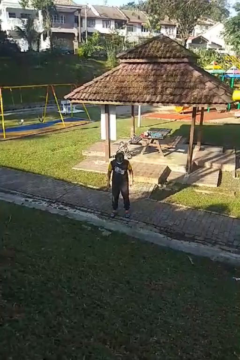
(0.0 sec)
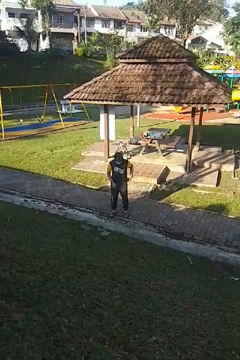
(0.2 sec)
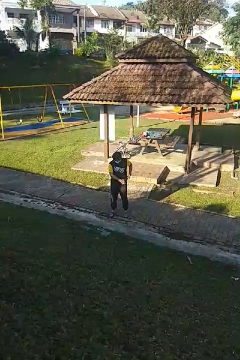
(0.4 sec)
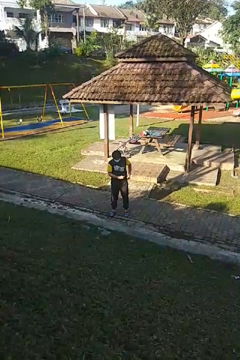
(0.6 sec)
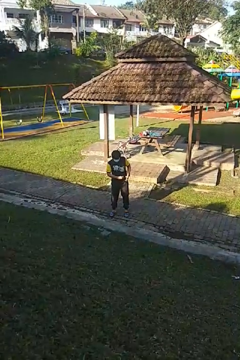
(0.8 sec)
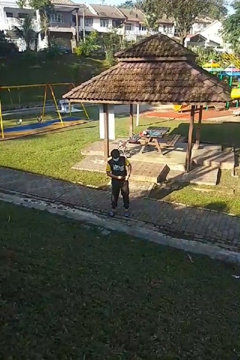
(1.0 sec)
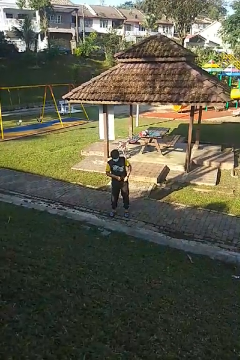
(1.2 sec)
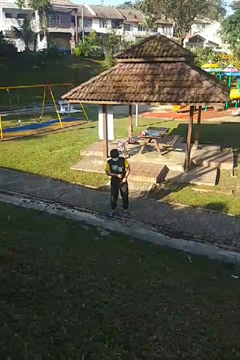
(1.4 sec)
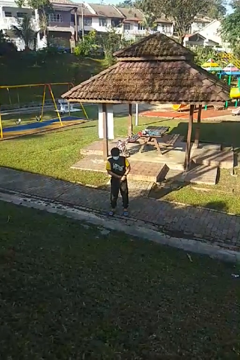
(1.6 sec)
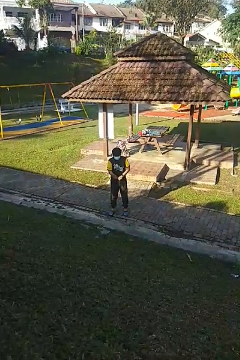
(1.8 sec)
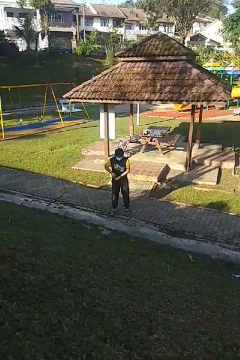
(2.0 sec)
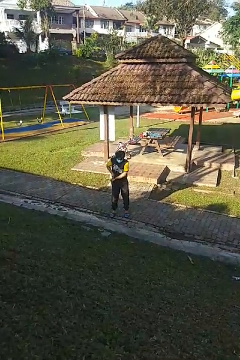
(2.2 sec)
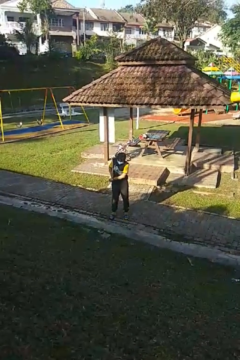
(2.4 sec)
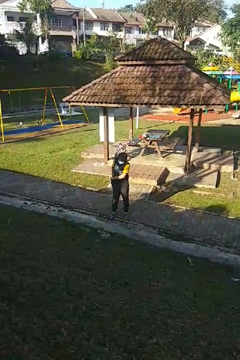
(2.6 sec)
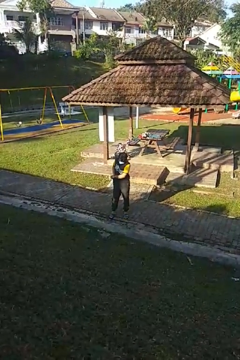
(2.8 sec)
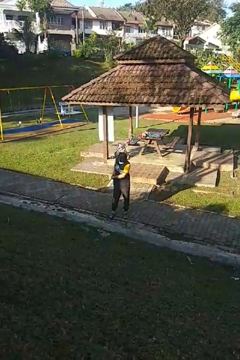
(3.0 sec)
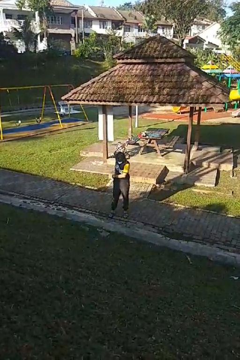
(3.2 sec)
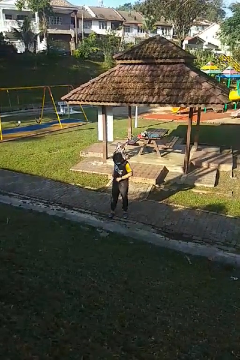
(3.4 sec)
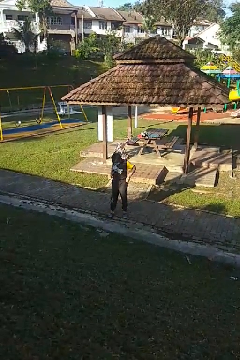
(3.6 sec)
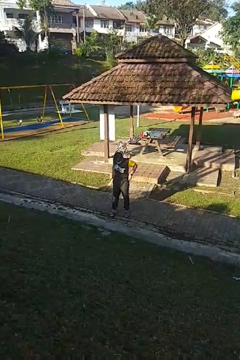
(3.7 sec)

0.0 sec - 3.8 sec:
person tucks in shirt

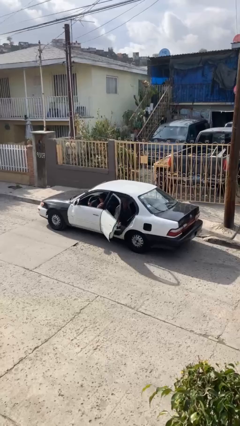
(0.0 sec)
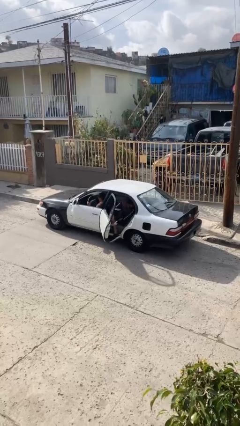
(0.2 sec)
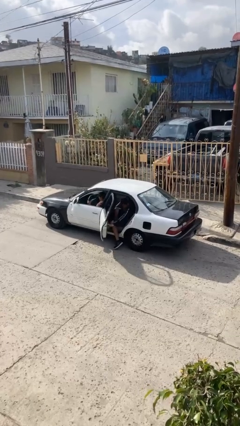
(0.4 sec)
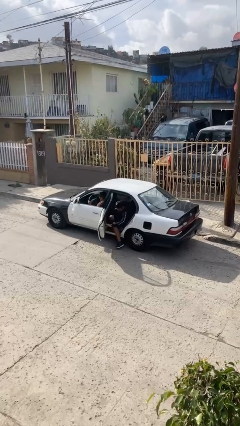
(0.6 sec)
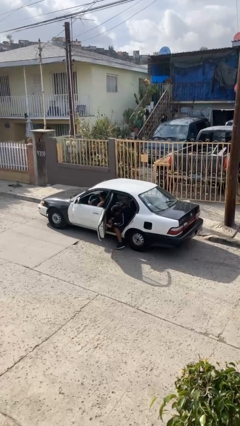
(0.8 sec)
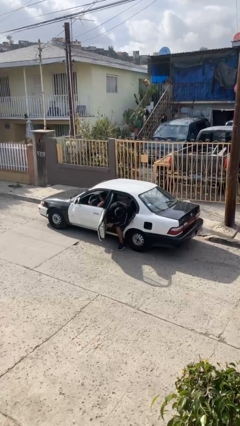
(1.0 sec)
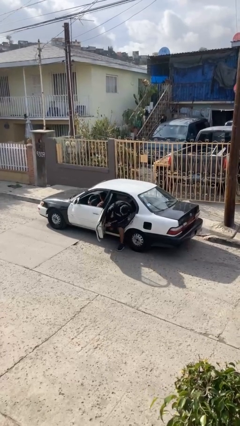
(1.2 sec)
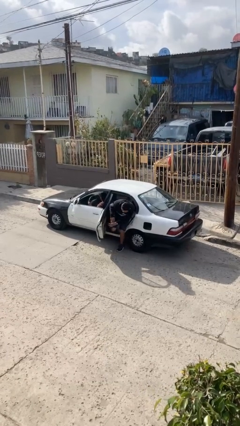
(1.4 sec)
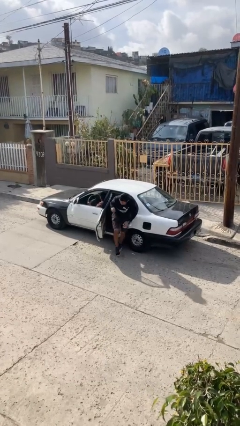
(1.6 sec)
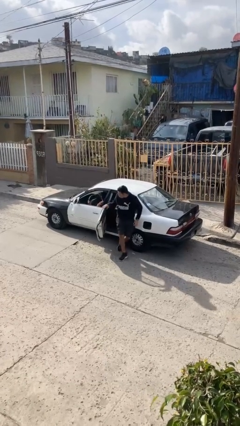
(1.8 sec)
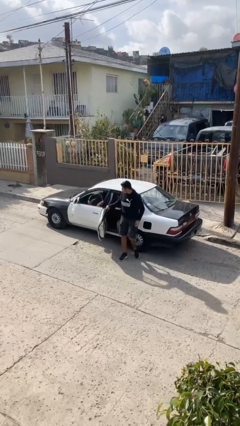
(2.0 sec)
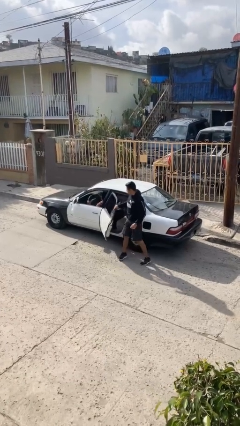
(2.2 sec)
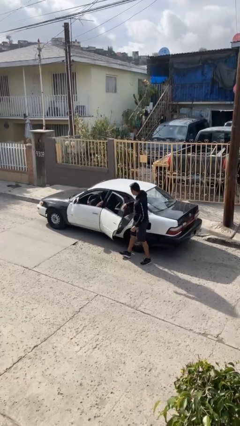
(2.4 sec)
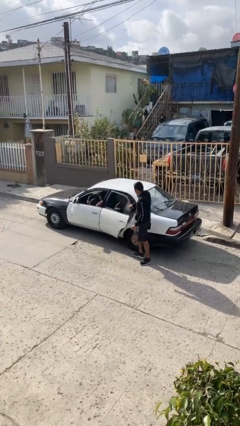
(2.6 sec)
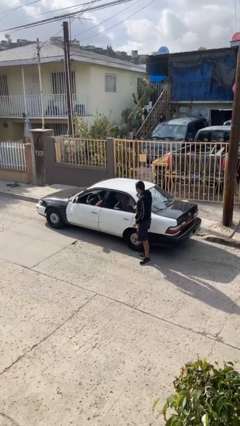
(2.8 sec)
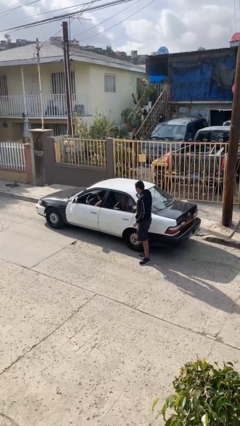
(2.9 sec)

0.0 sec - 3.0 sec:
car drops off person

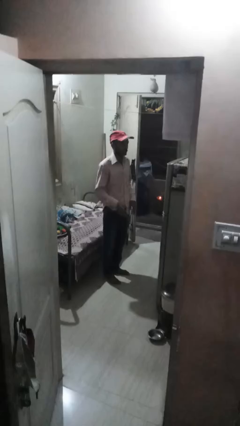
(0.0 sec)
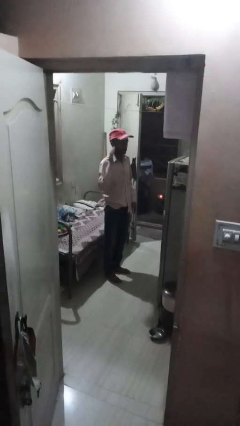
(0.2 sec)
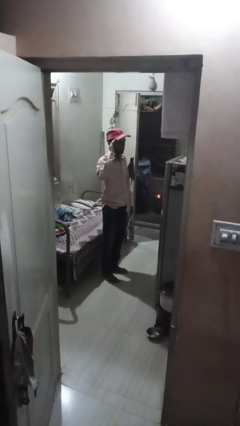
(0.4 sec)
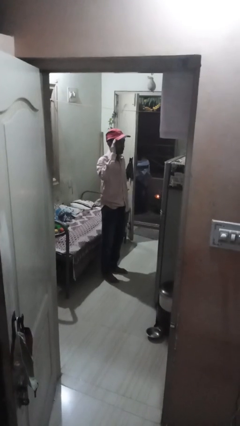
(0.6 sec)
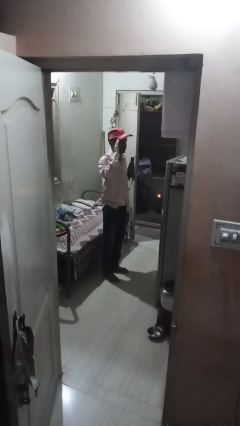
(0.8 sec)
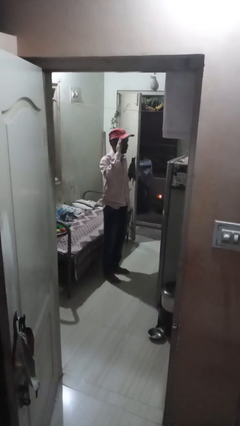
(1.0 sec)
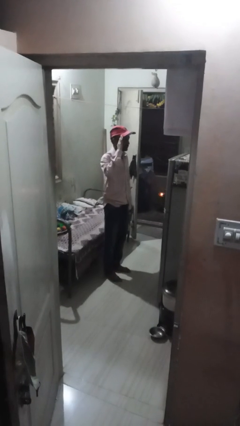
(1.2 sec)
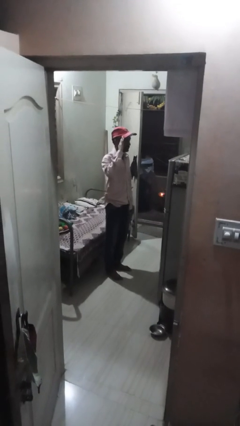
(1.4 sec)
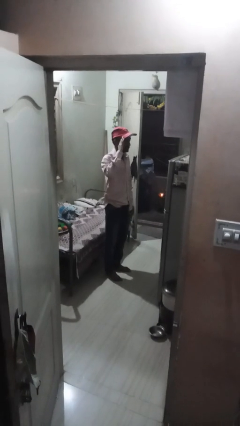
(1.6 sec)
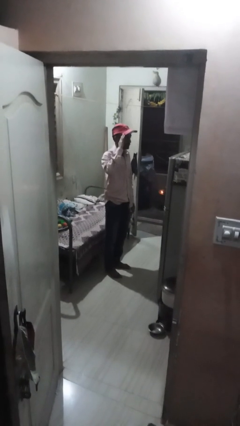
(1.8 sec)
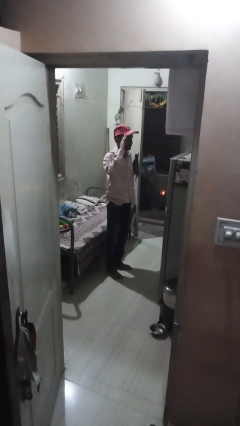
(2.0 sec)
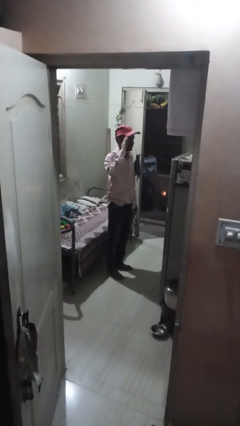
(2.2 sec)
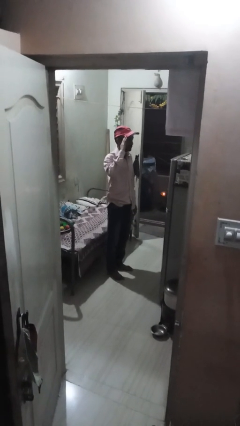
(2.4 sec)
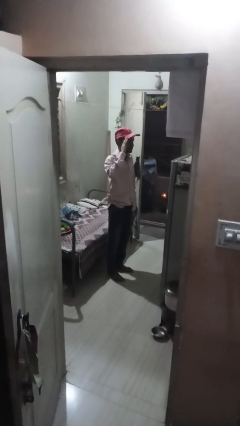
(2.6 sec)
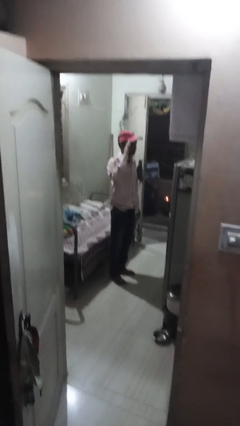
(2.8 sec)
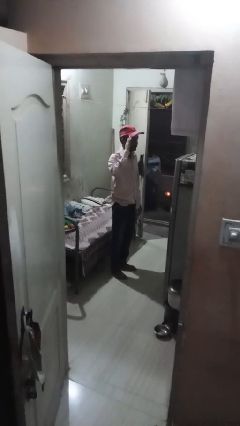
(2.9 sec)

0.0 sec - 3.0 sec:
person salutes

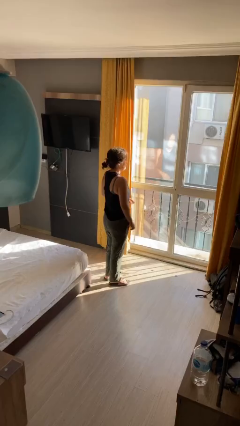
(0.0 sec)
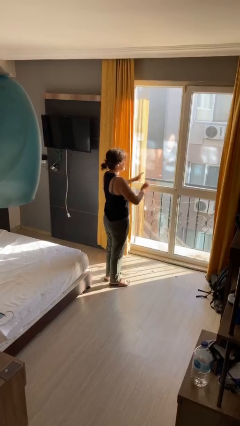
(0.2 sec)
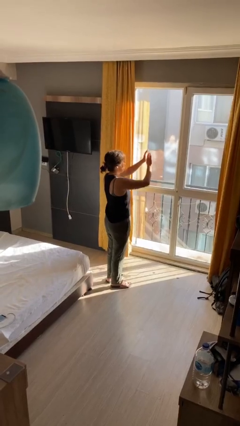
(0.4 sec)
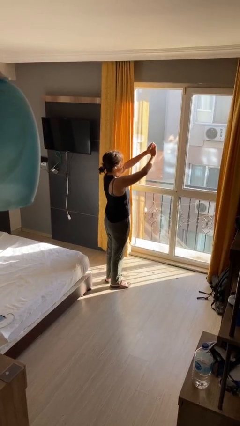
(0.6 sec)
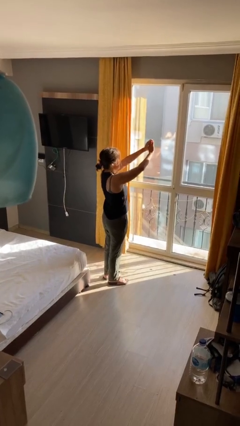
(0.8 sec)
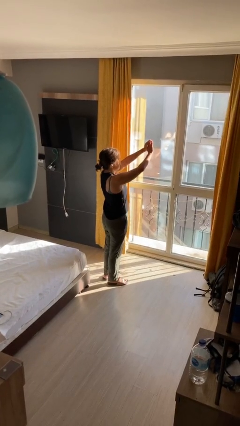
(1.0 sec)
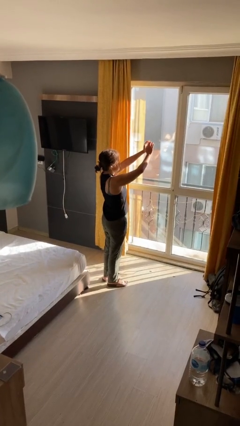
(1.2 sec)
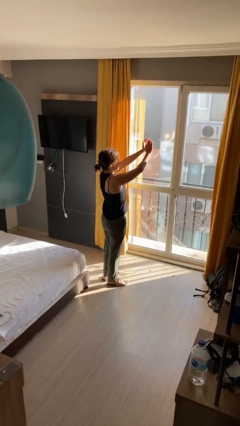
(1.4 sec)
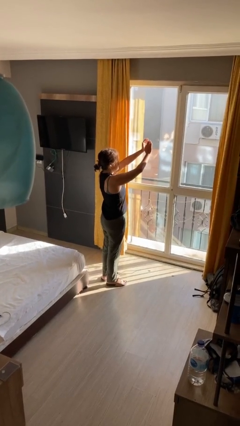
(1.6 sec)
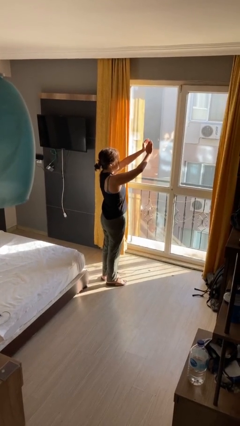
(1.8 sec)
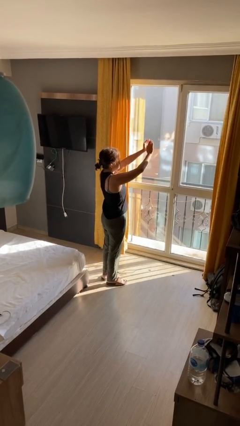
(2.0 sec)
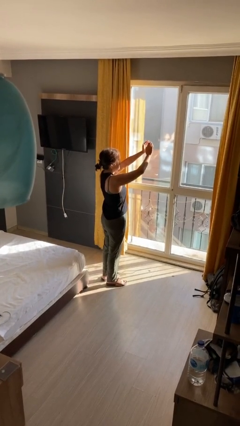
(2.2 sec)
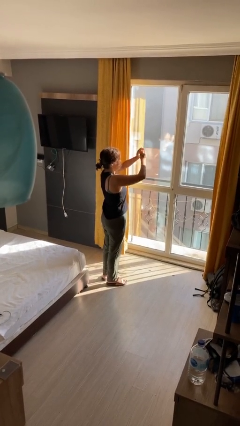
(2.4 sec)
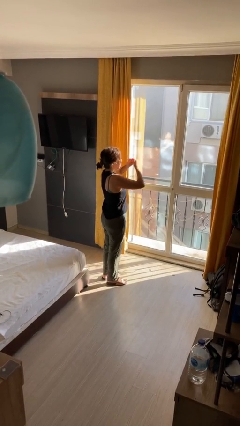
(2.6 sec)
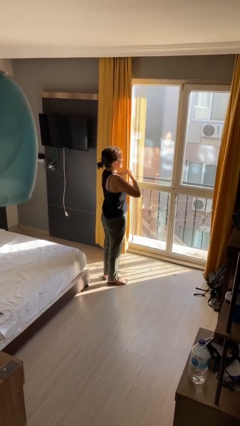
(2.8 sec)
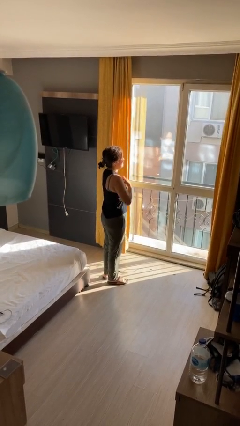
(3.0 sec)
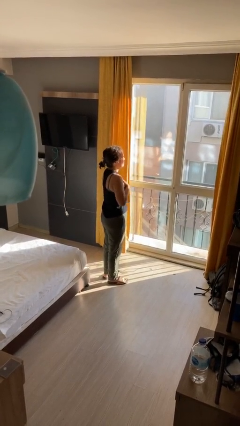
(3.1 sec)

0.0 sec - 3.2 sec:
person prays

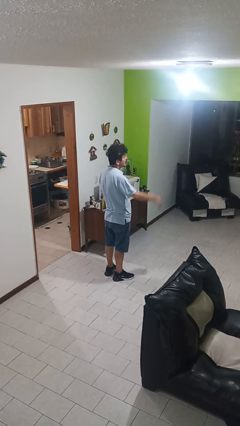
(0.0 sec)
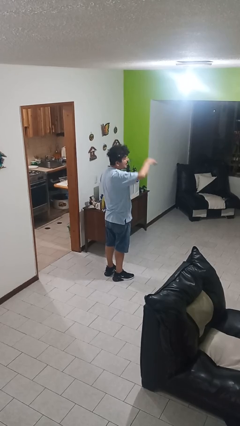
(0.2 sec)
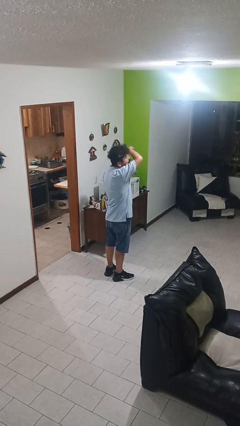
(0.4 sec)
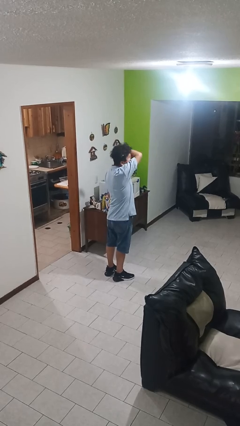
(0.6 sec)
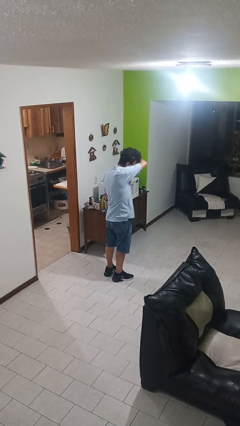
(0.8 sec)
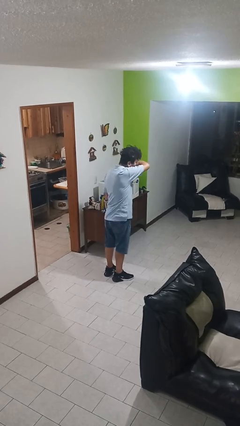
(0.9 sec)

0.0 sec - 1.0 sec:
person sneezes into arm

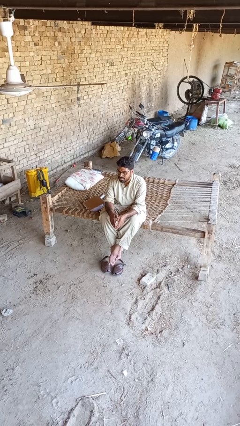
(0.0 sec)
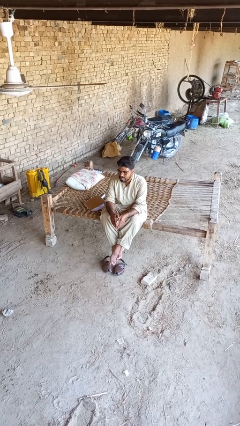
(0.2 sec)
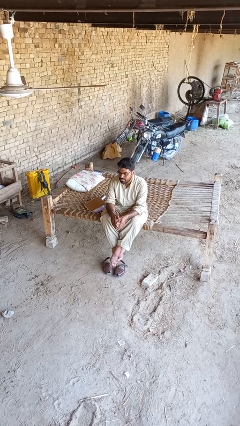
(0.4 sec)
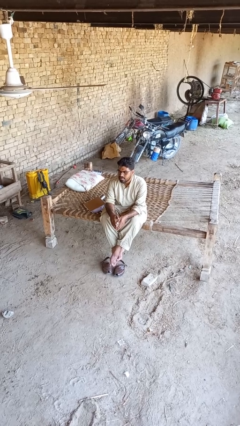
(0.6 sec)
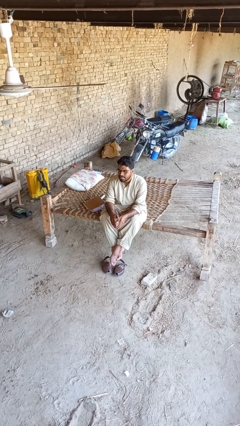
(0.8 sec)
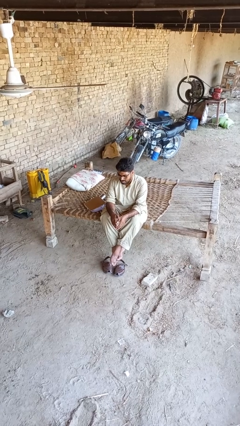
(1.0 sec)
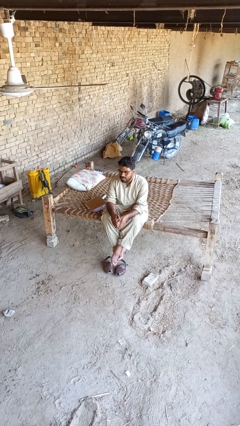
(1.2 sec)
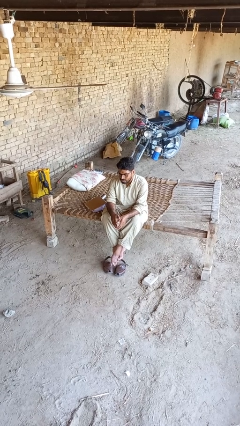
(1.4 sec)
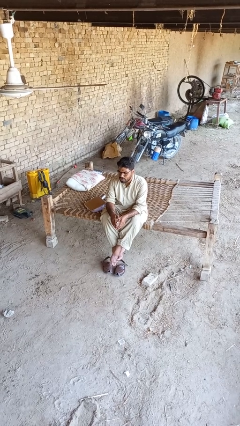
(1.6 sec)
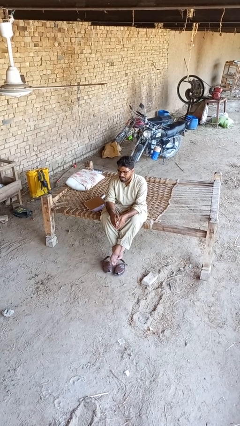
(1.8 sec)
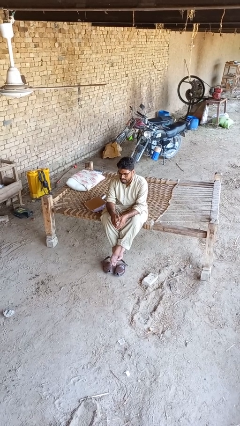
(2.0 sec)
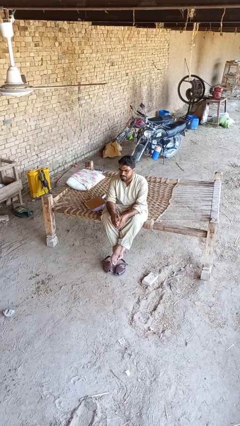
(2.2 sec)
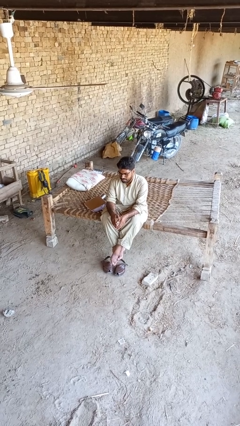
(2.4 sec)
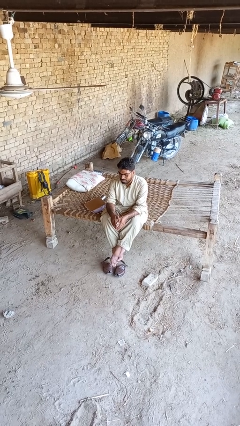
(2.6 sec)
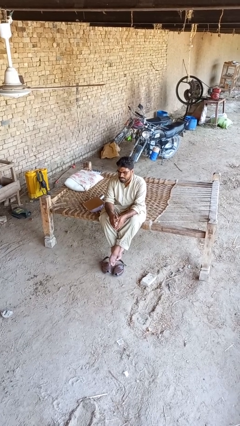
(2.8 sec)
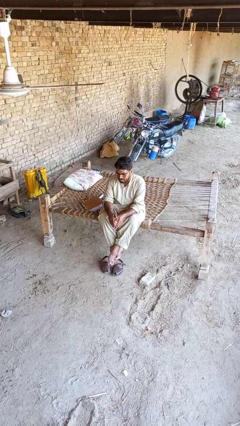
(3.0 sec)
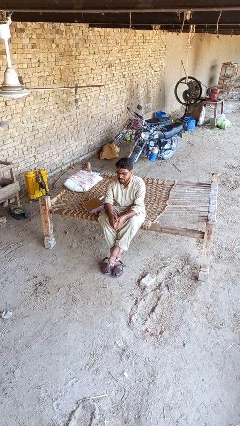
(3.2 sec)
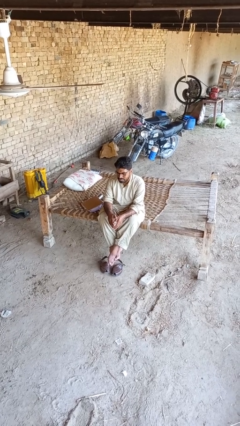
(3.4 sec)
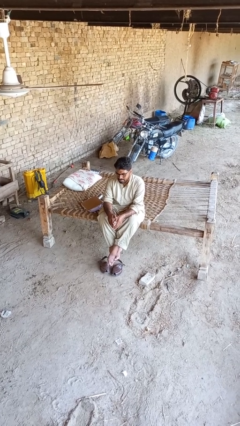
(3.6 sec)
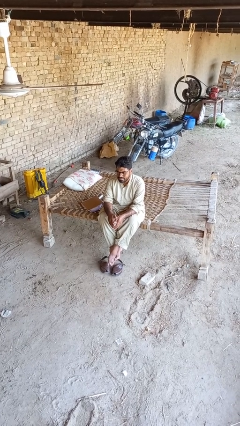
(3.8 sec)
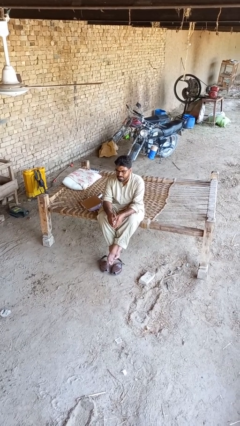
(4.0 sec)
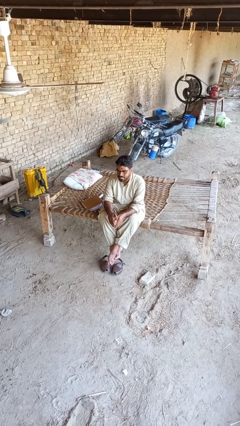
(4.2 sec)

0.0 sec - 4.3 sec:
person nods head
